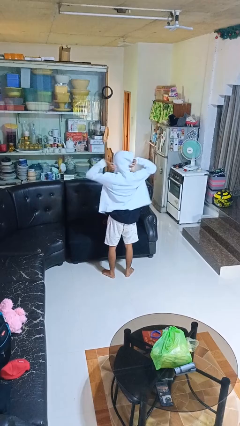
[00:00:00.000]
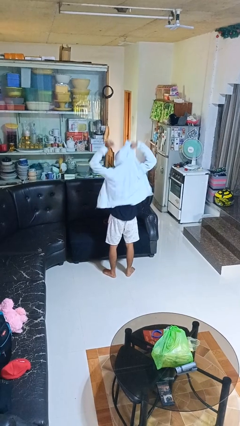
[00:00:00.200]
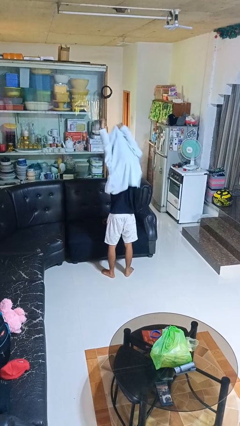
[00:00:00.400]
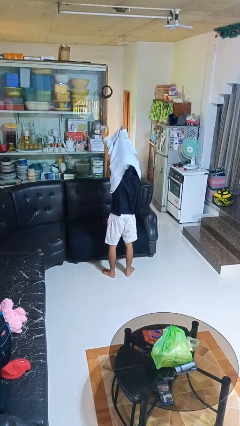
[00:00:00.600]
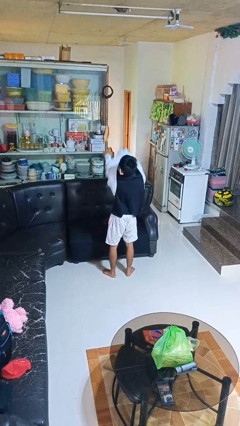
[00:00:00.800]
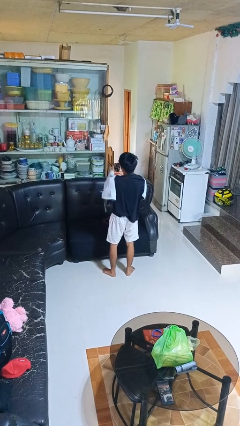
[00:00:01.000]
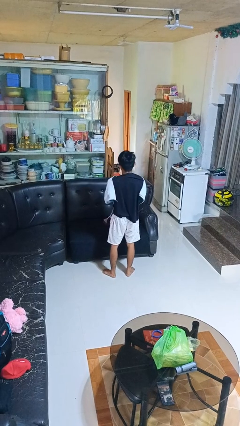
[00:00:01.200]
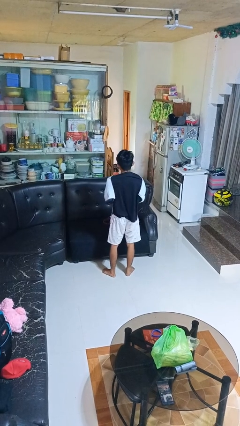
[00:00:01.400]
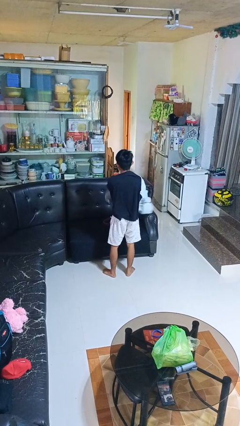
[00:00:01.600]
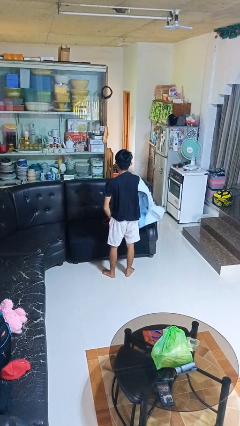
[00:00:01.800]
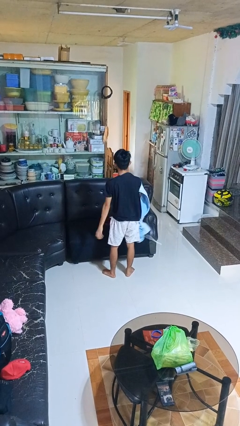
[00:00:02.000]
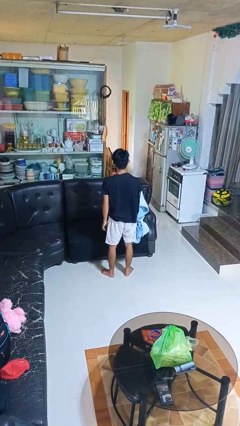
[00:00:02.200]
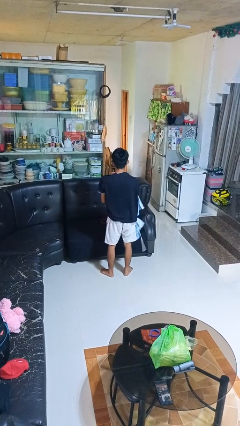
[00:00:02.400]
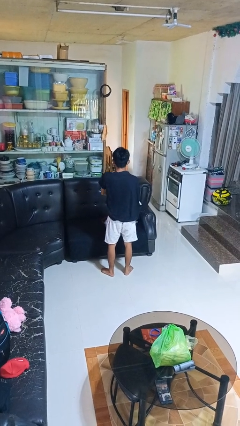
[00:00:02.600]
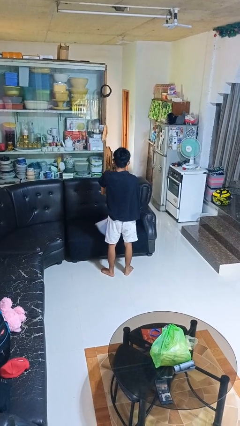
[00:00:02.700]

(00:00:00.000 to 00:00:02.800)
person takes off hoodie

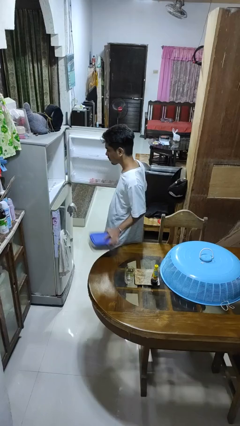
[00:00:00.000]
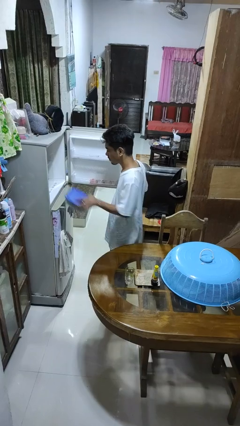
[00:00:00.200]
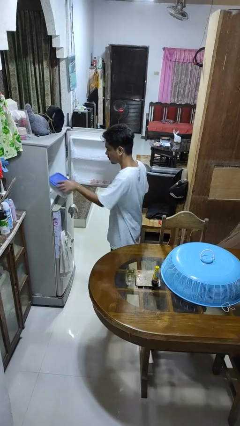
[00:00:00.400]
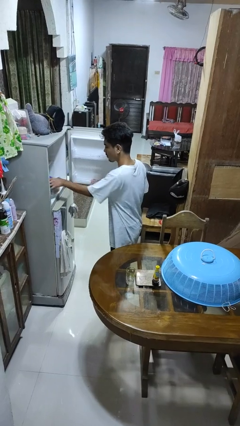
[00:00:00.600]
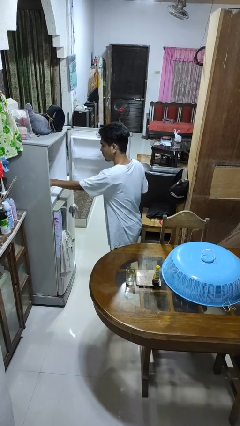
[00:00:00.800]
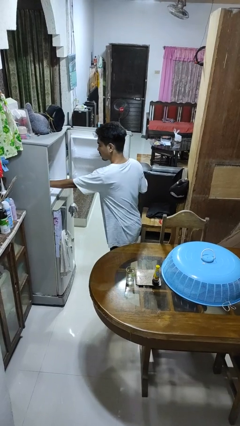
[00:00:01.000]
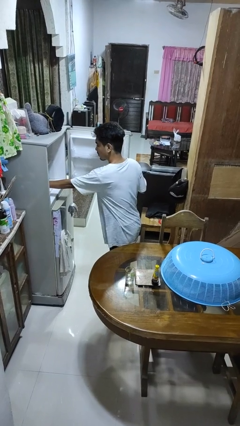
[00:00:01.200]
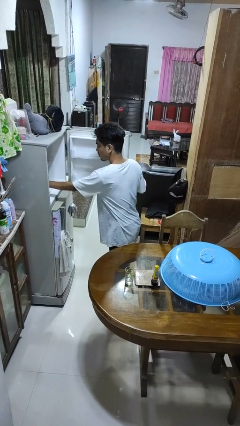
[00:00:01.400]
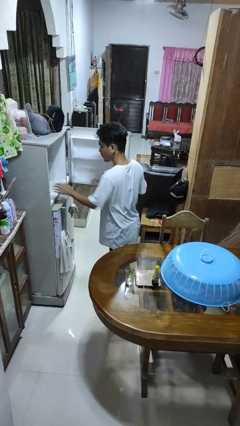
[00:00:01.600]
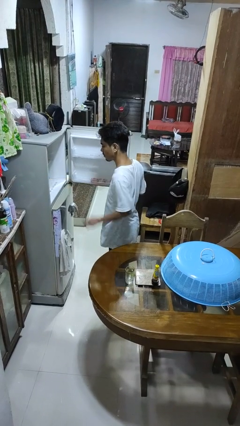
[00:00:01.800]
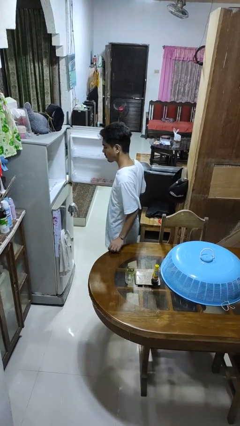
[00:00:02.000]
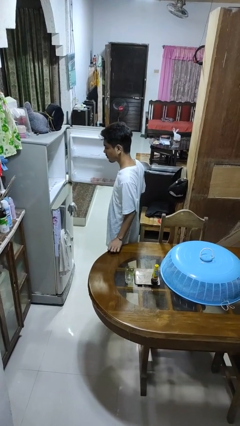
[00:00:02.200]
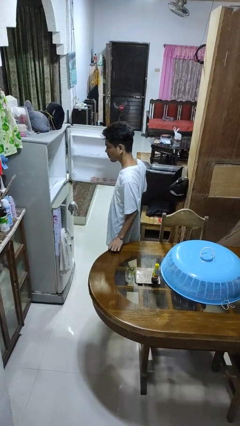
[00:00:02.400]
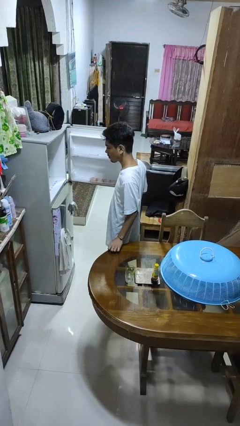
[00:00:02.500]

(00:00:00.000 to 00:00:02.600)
person puts object into refrigerator

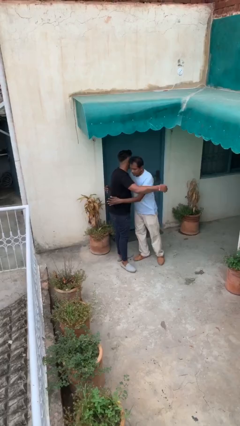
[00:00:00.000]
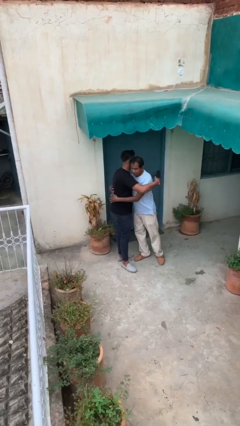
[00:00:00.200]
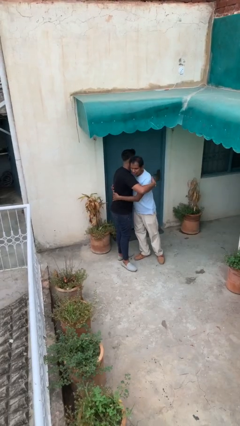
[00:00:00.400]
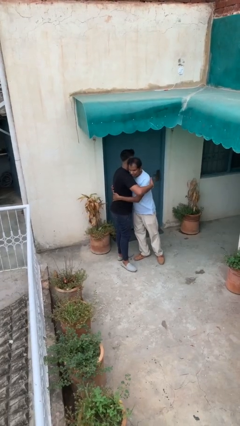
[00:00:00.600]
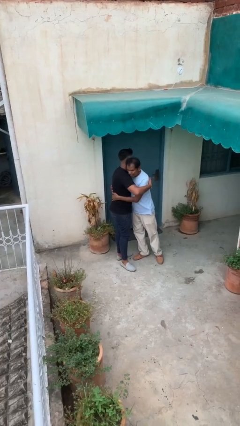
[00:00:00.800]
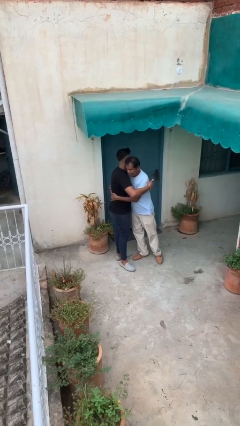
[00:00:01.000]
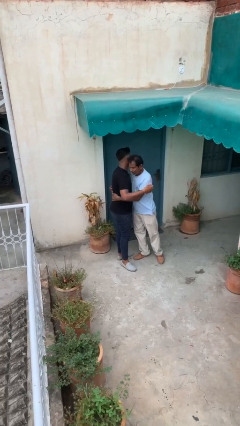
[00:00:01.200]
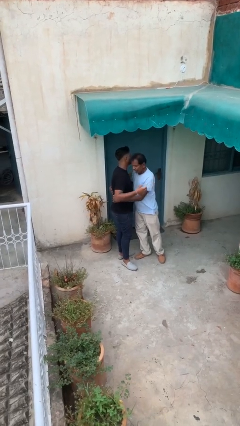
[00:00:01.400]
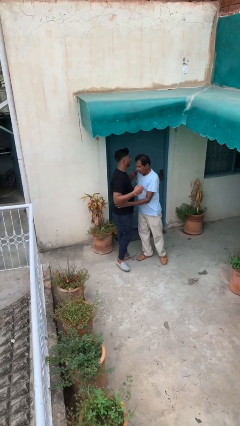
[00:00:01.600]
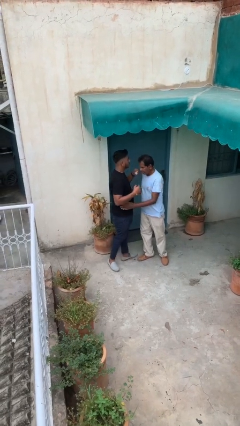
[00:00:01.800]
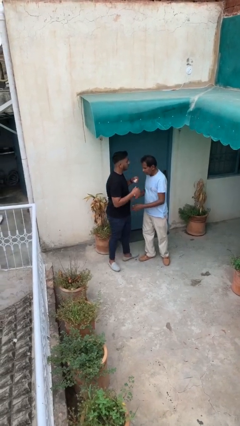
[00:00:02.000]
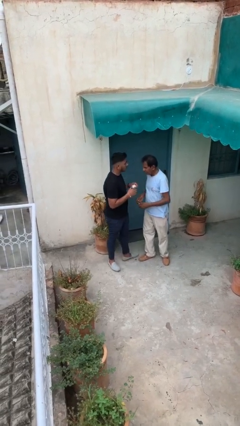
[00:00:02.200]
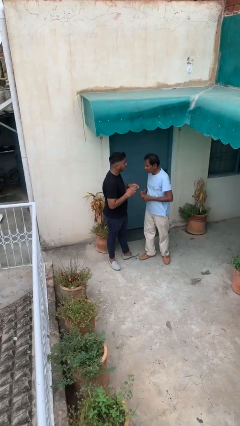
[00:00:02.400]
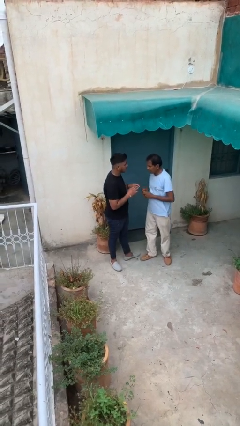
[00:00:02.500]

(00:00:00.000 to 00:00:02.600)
person embraces person

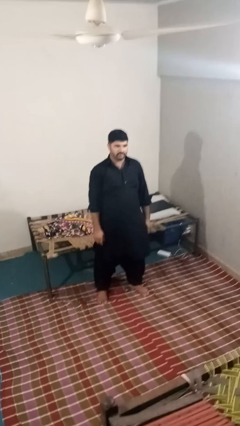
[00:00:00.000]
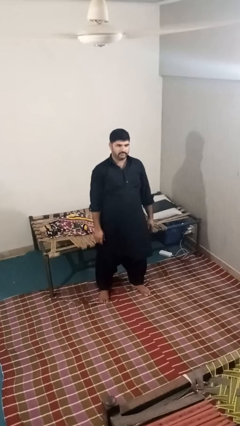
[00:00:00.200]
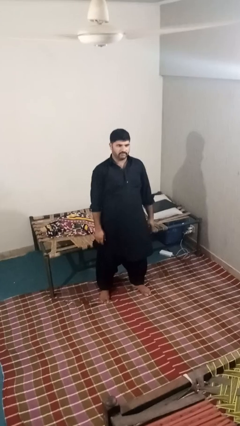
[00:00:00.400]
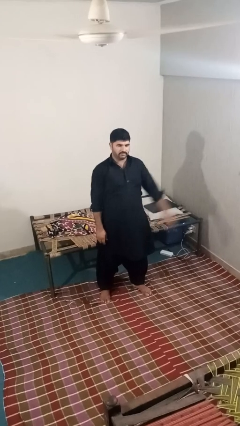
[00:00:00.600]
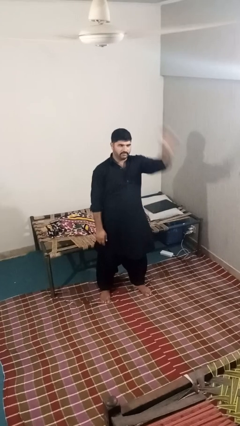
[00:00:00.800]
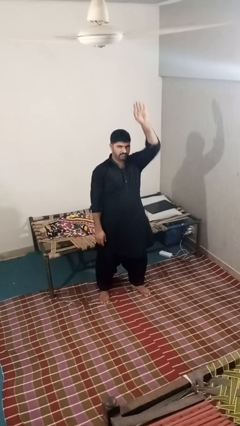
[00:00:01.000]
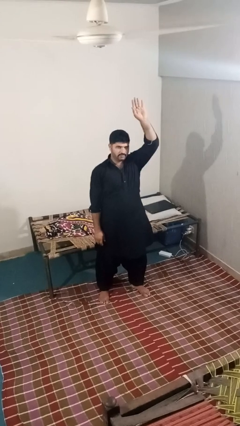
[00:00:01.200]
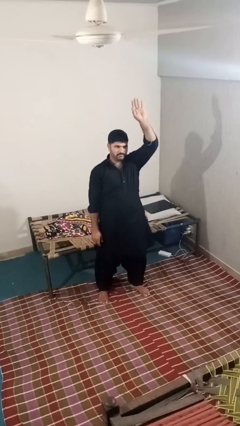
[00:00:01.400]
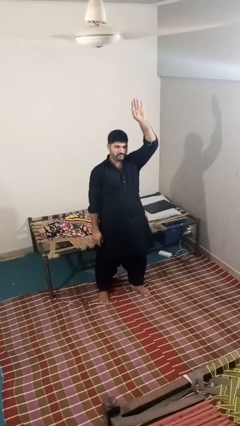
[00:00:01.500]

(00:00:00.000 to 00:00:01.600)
person gestures raise hand

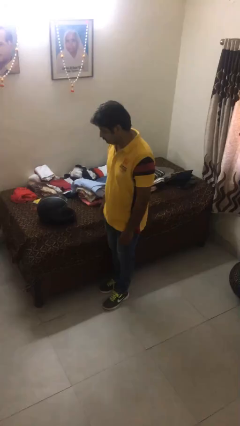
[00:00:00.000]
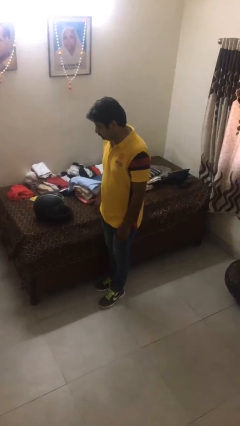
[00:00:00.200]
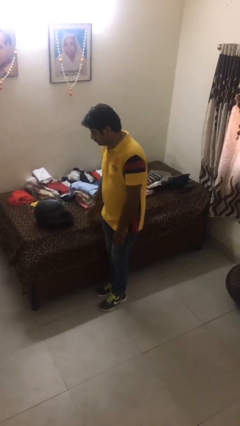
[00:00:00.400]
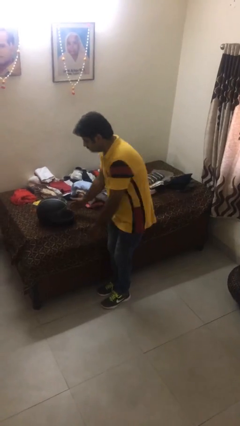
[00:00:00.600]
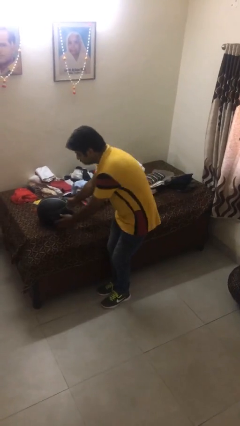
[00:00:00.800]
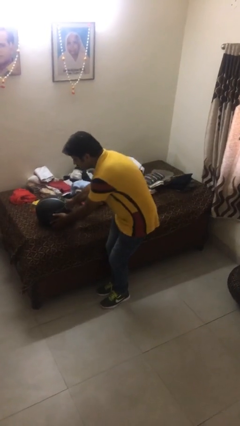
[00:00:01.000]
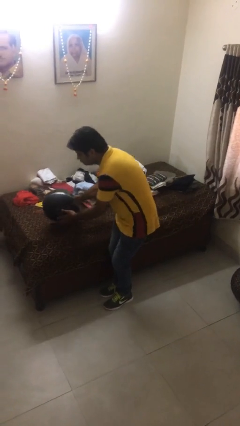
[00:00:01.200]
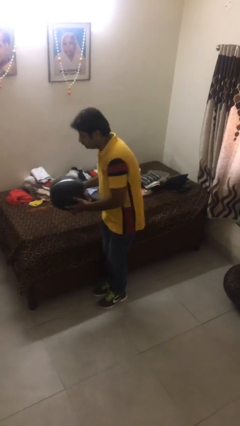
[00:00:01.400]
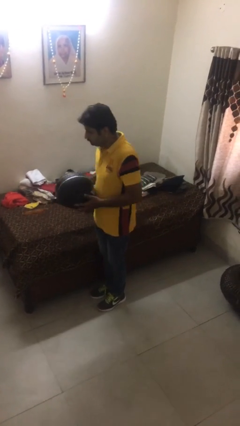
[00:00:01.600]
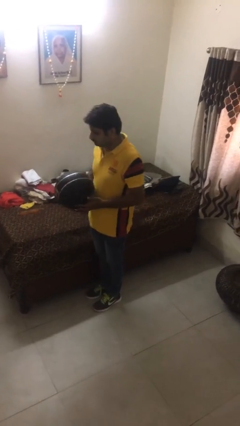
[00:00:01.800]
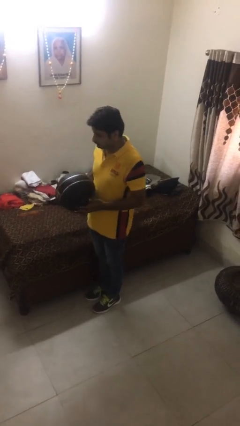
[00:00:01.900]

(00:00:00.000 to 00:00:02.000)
person picks up object from bed

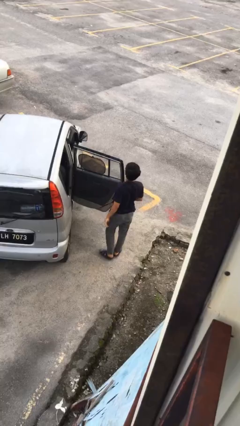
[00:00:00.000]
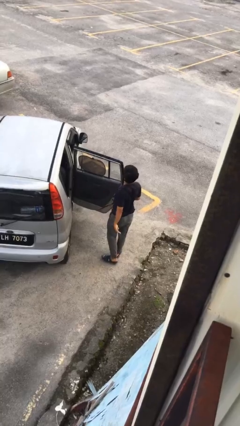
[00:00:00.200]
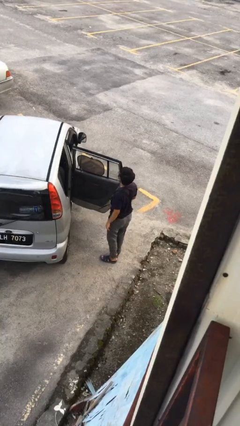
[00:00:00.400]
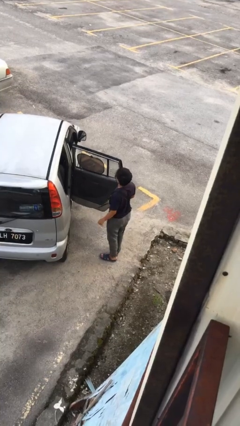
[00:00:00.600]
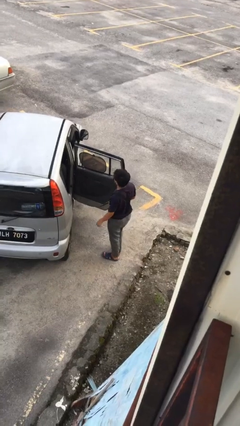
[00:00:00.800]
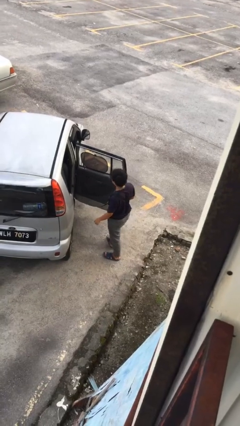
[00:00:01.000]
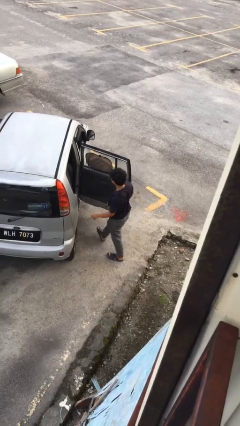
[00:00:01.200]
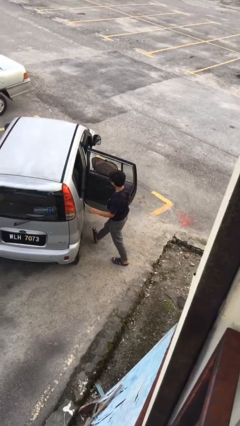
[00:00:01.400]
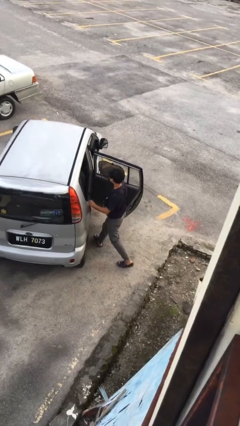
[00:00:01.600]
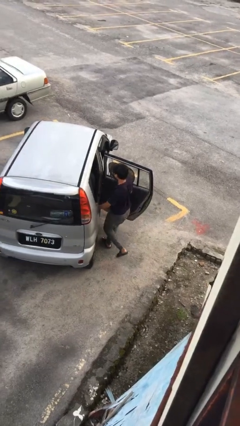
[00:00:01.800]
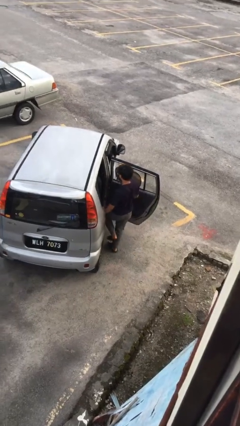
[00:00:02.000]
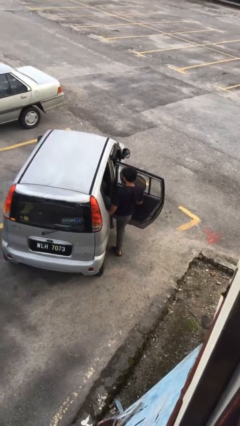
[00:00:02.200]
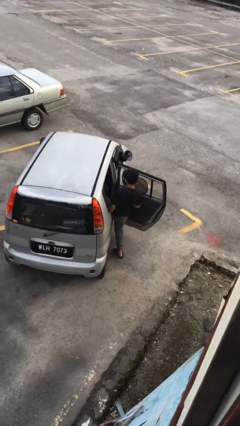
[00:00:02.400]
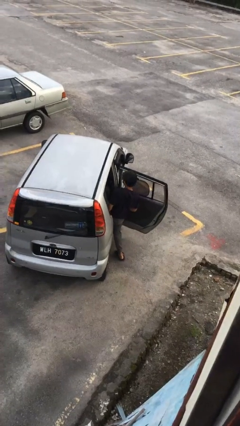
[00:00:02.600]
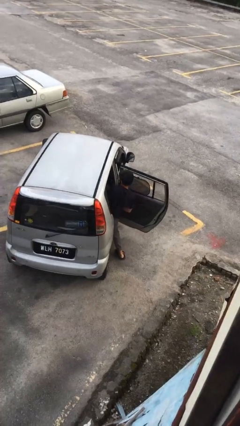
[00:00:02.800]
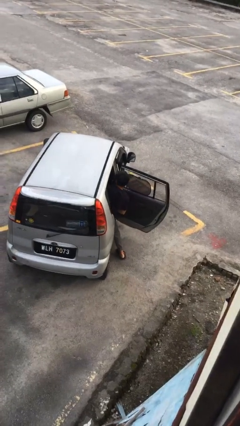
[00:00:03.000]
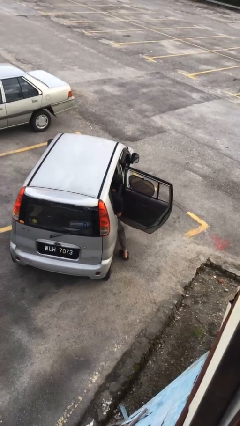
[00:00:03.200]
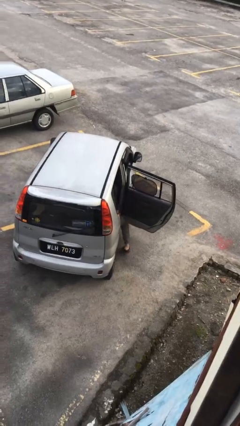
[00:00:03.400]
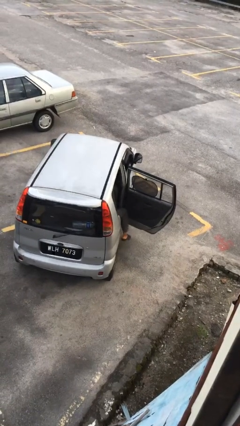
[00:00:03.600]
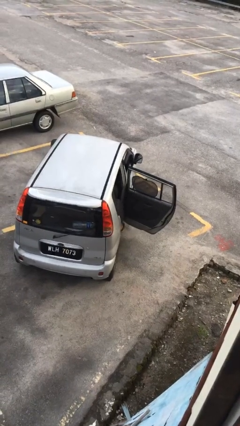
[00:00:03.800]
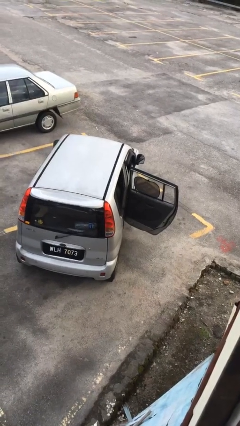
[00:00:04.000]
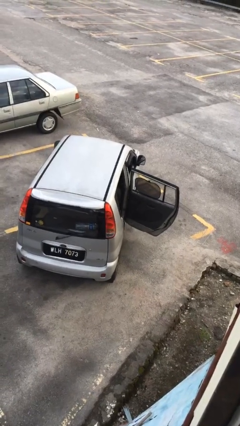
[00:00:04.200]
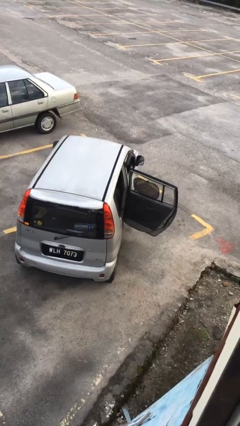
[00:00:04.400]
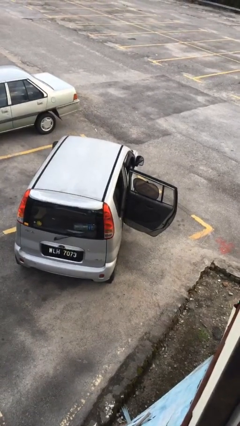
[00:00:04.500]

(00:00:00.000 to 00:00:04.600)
person enters car

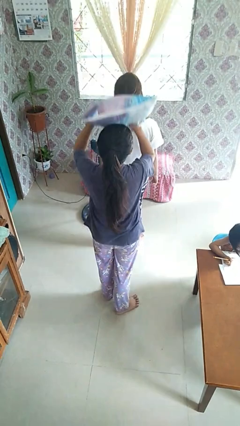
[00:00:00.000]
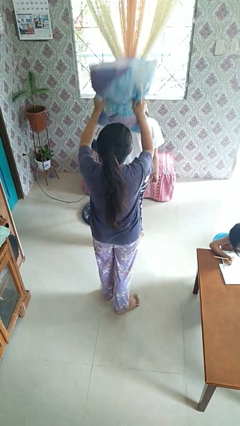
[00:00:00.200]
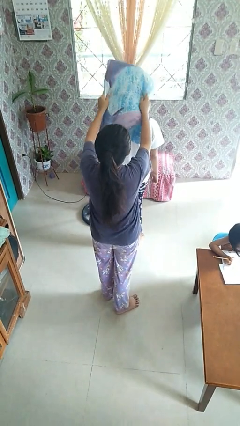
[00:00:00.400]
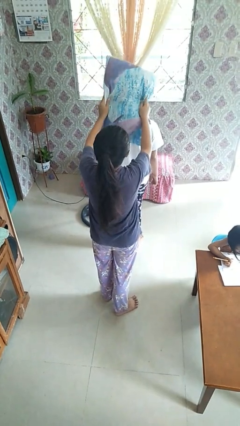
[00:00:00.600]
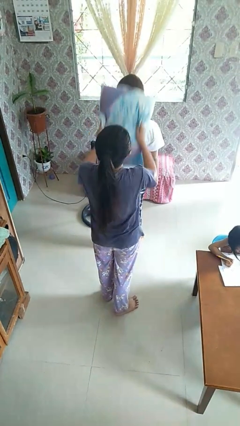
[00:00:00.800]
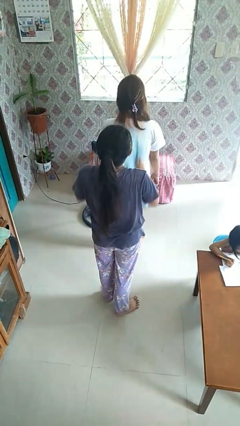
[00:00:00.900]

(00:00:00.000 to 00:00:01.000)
person hits person with pillow
